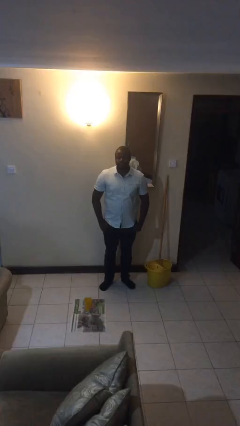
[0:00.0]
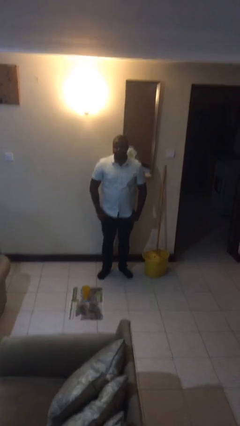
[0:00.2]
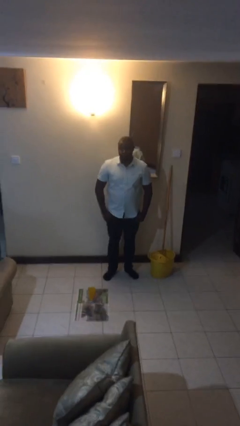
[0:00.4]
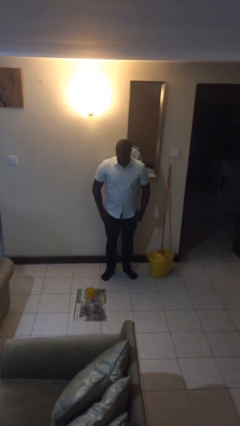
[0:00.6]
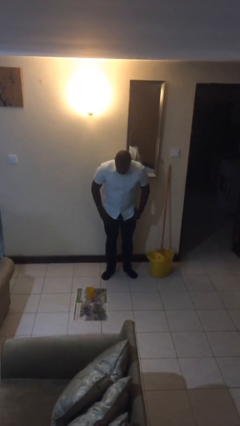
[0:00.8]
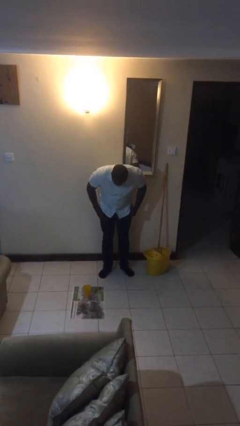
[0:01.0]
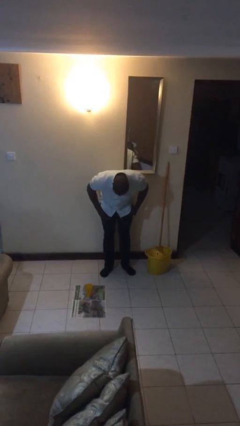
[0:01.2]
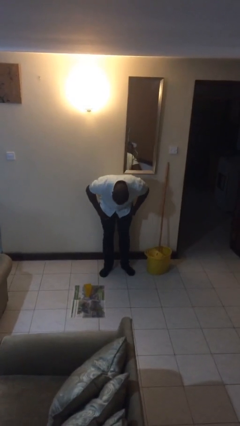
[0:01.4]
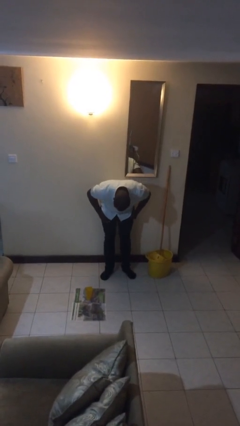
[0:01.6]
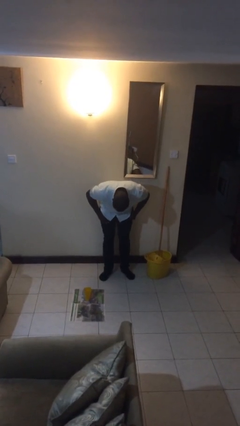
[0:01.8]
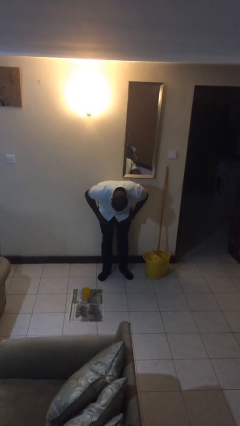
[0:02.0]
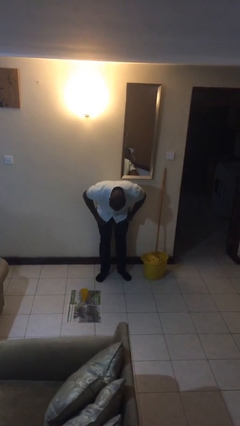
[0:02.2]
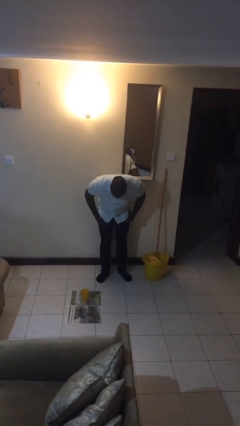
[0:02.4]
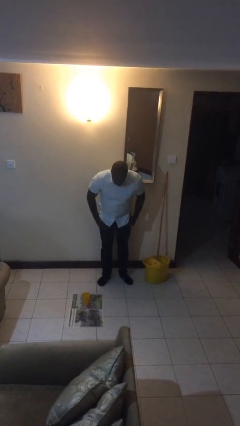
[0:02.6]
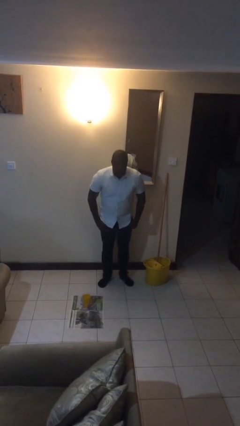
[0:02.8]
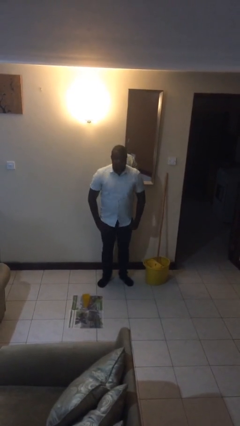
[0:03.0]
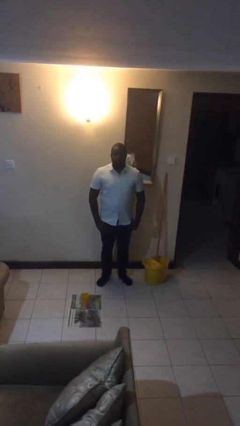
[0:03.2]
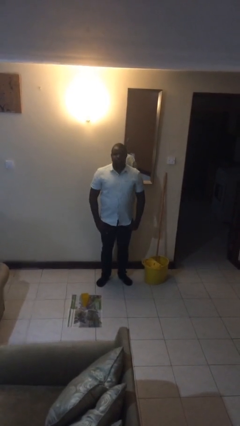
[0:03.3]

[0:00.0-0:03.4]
person bows

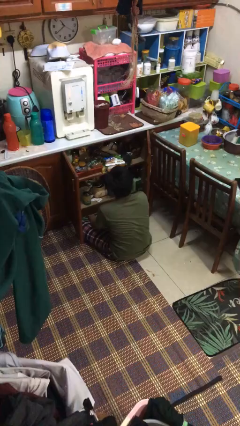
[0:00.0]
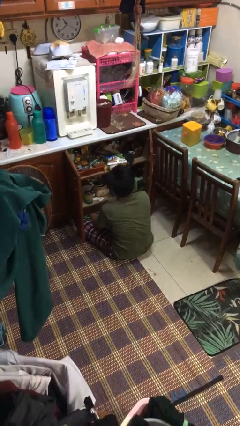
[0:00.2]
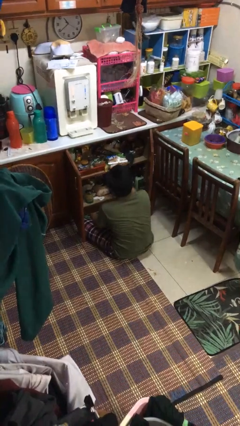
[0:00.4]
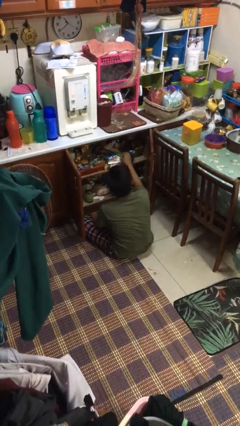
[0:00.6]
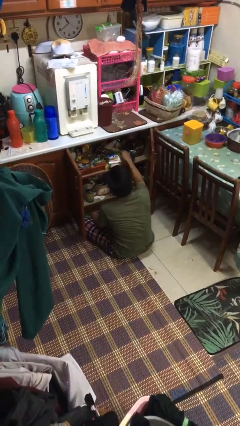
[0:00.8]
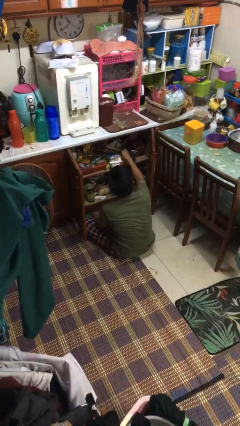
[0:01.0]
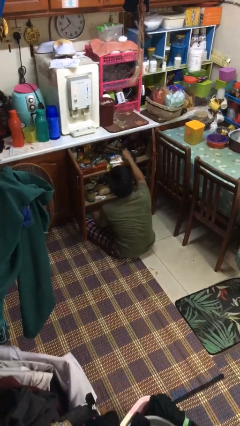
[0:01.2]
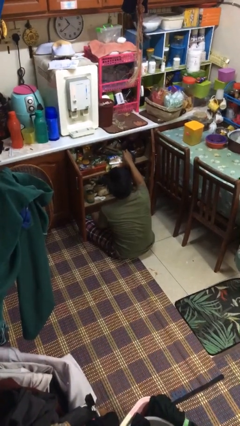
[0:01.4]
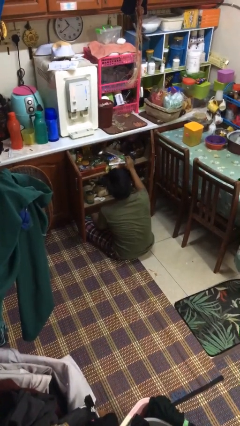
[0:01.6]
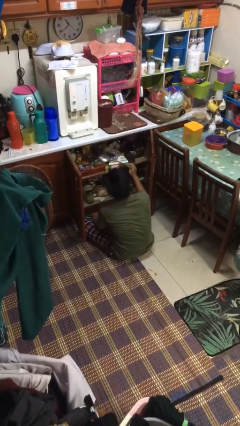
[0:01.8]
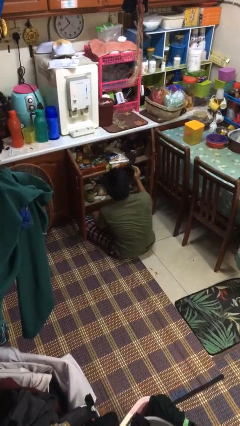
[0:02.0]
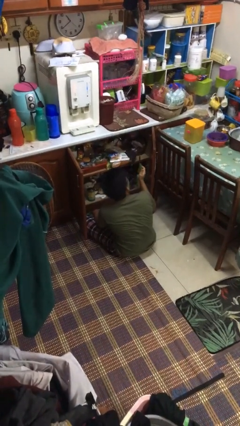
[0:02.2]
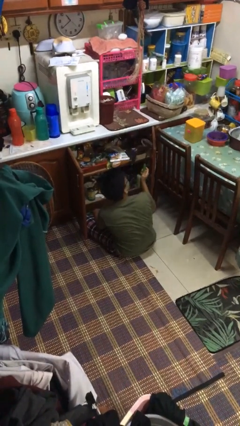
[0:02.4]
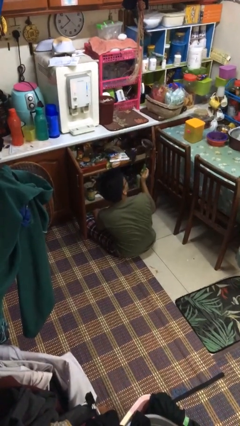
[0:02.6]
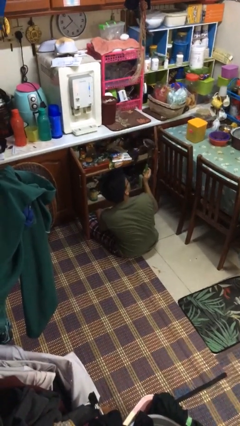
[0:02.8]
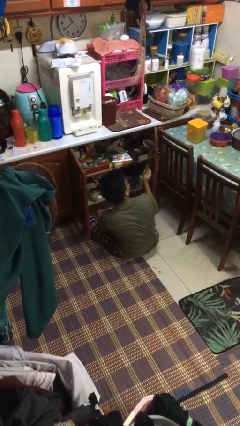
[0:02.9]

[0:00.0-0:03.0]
person takes object from kitchen drawer

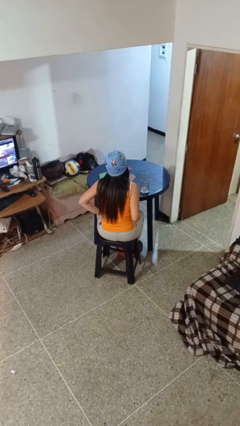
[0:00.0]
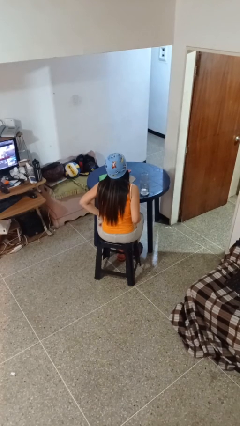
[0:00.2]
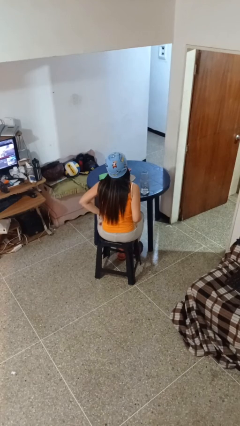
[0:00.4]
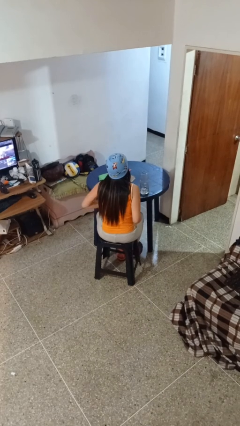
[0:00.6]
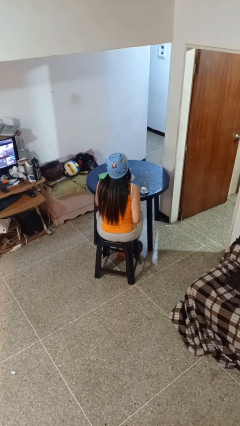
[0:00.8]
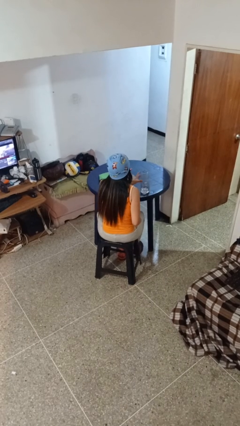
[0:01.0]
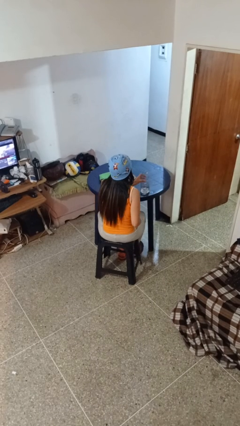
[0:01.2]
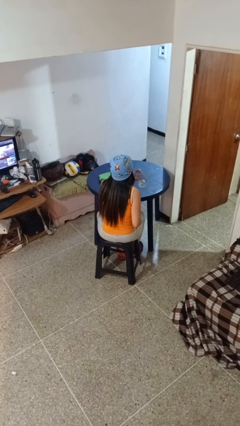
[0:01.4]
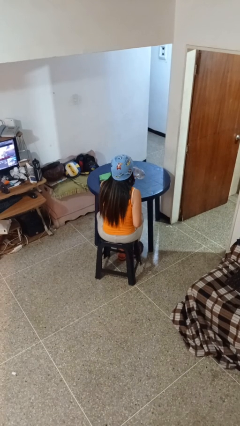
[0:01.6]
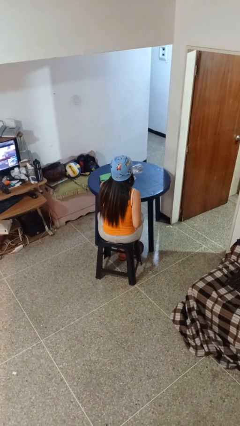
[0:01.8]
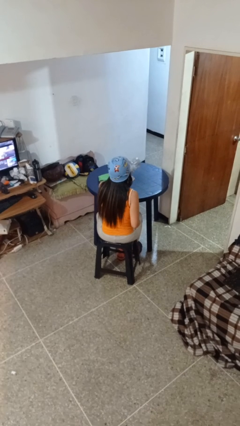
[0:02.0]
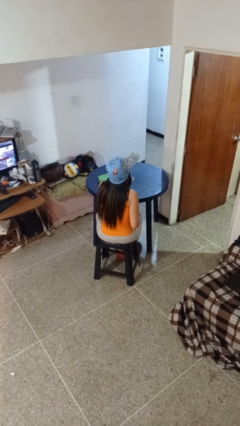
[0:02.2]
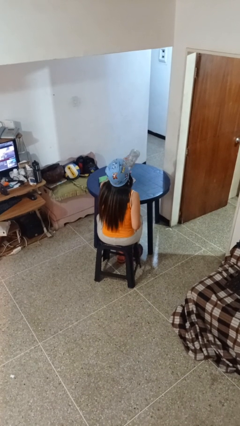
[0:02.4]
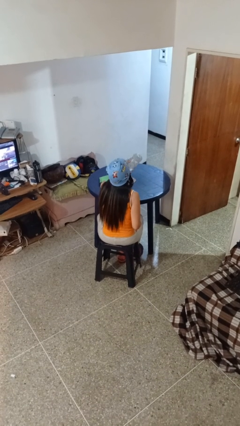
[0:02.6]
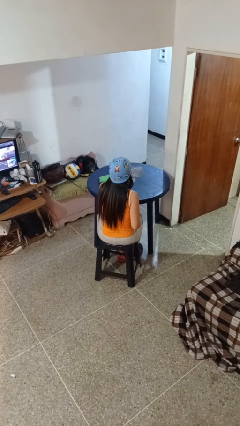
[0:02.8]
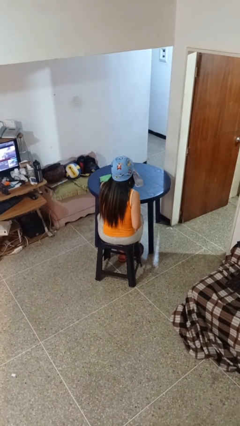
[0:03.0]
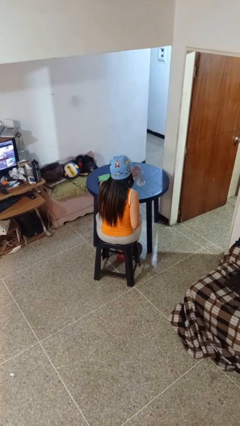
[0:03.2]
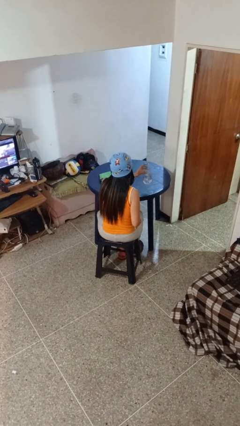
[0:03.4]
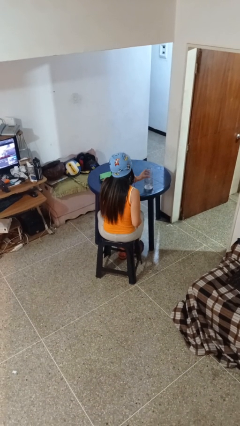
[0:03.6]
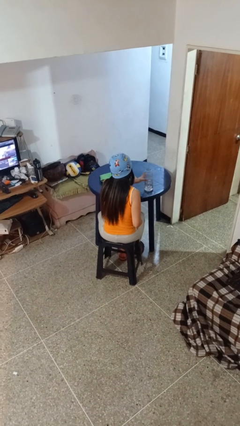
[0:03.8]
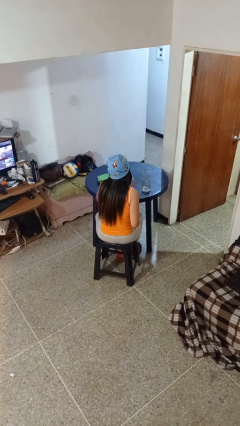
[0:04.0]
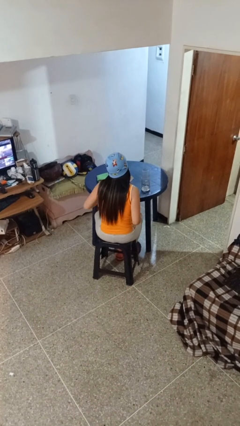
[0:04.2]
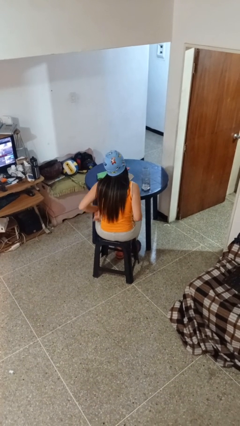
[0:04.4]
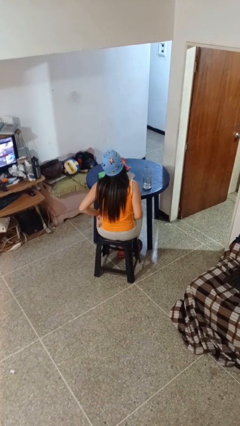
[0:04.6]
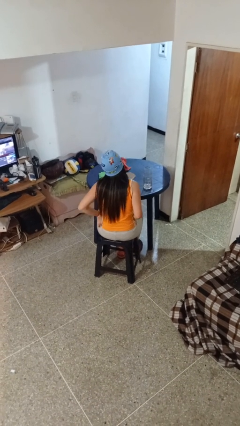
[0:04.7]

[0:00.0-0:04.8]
person drinks from bottle

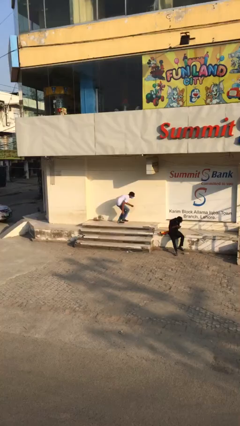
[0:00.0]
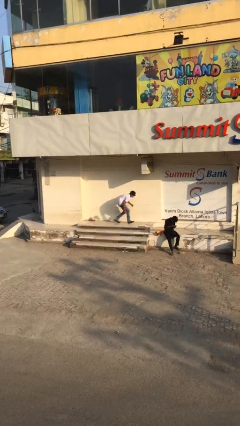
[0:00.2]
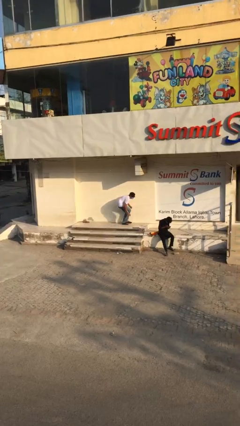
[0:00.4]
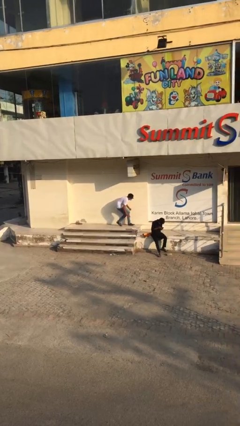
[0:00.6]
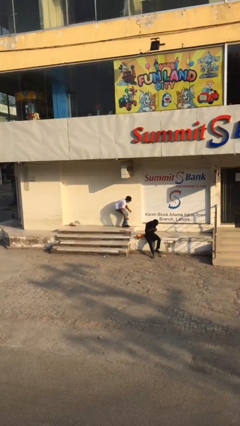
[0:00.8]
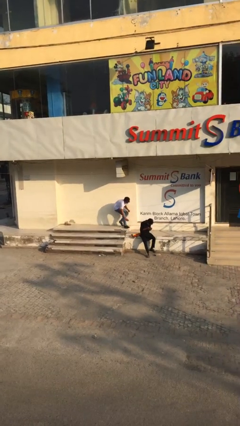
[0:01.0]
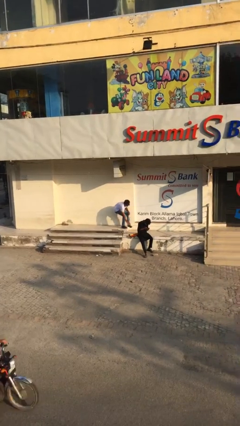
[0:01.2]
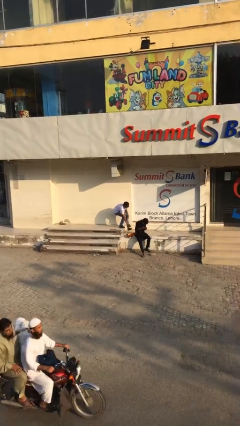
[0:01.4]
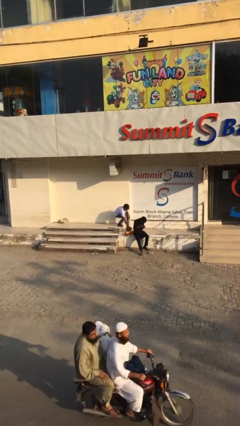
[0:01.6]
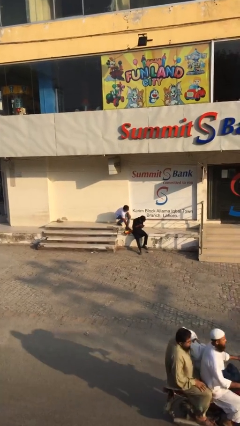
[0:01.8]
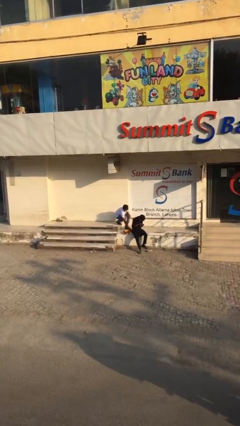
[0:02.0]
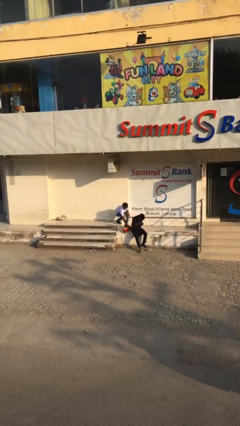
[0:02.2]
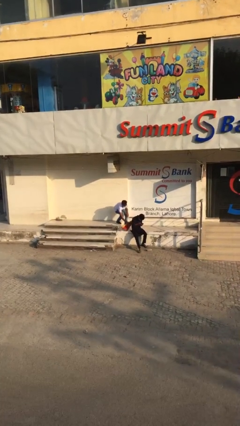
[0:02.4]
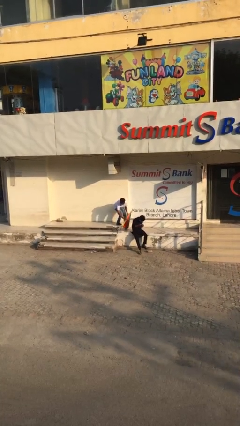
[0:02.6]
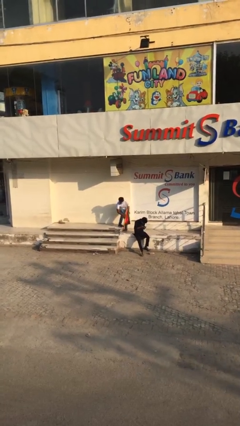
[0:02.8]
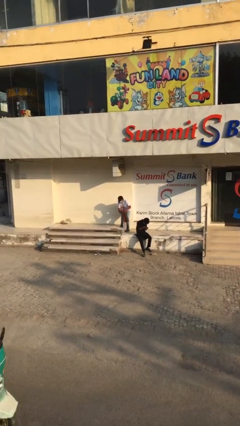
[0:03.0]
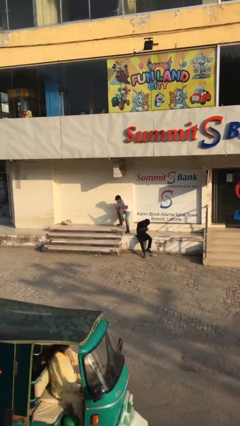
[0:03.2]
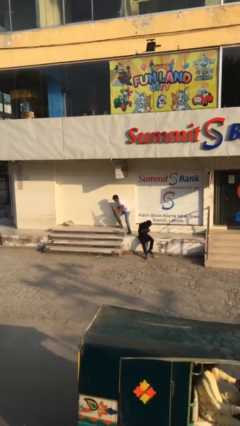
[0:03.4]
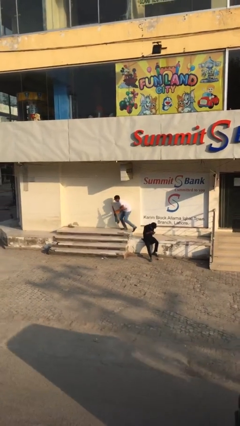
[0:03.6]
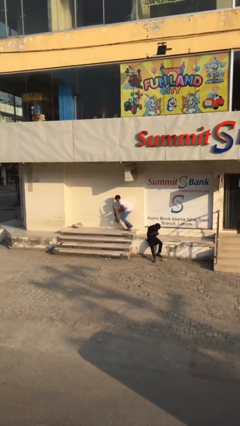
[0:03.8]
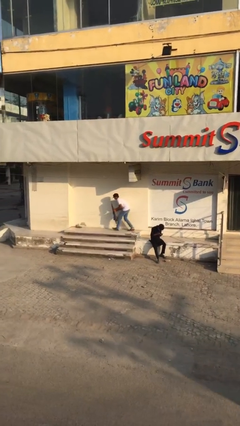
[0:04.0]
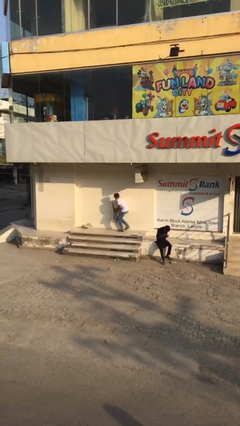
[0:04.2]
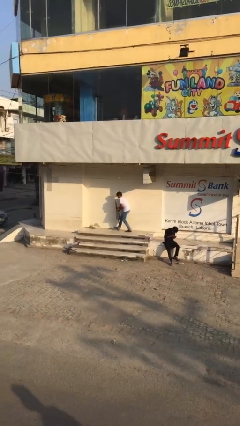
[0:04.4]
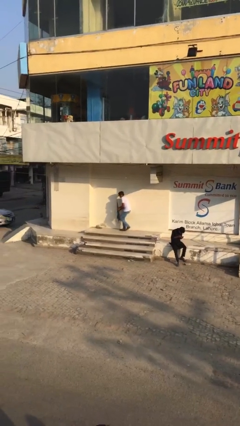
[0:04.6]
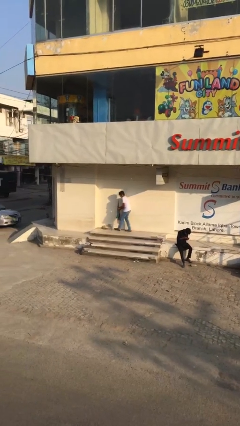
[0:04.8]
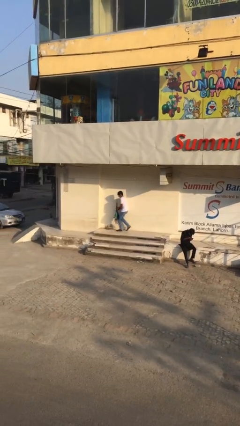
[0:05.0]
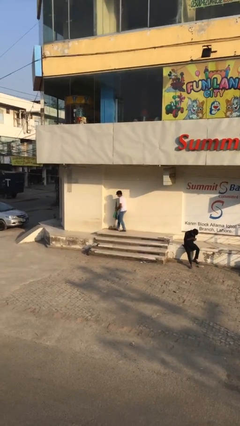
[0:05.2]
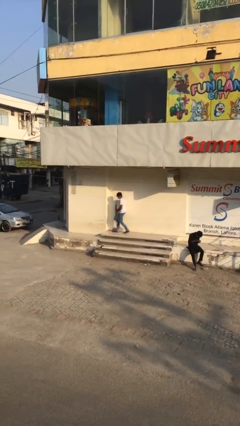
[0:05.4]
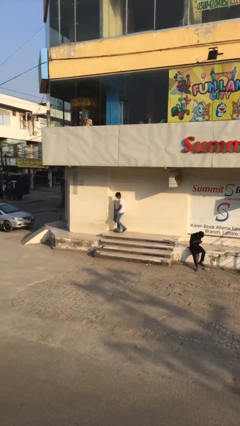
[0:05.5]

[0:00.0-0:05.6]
person steals object from person

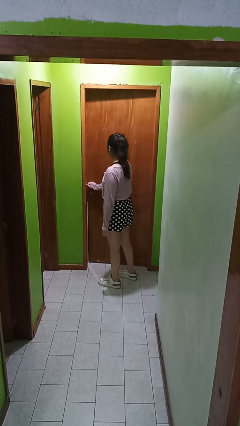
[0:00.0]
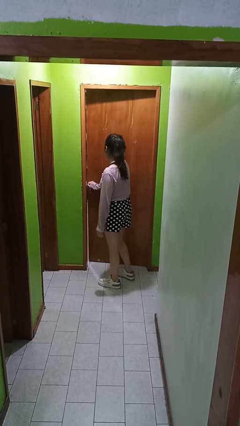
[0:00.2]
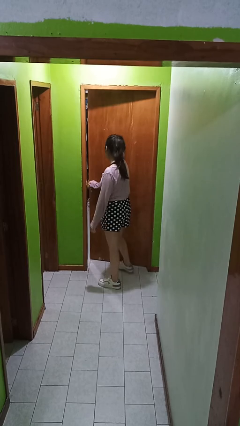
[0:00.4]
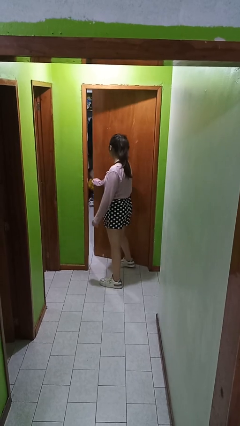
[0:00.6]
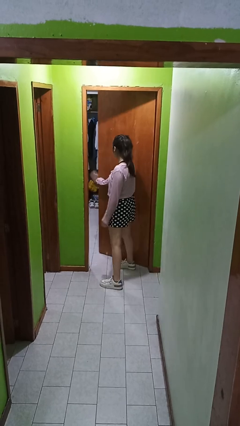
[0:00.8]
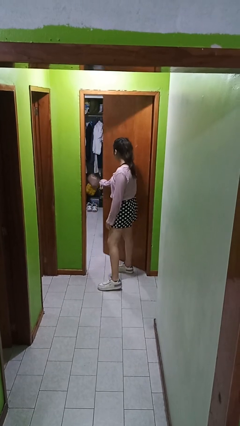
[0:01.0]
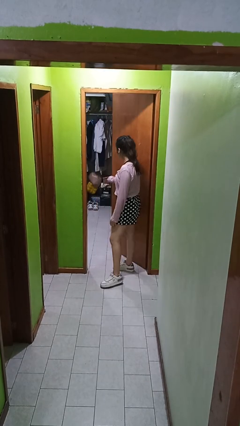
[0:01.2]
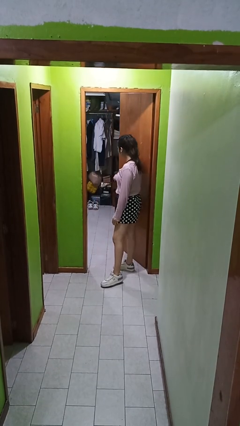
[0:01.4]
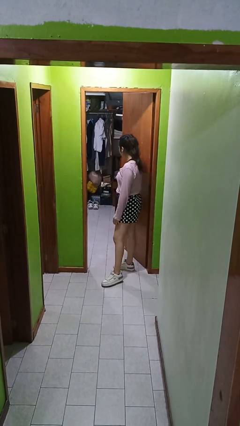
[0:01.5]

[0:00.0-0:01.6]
person opens facility door
